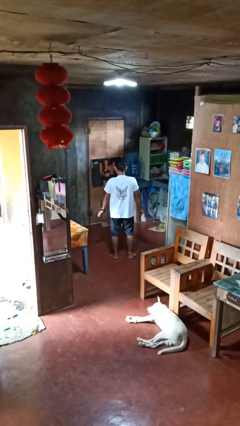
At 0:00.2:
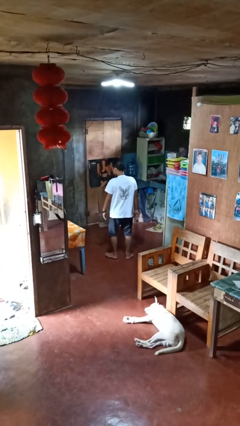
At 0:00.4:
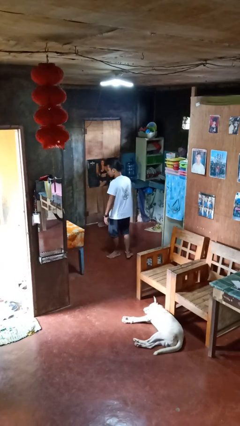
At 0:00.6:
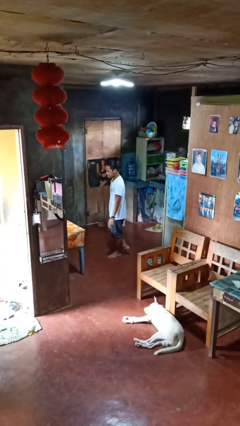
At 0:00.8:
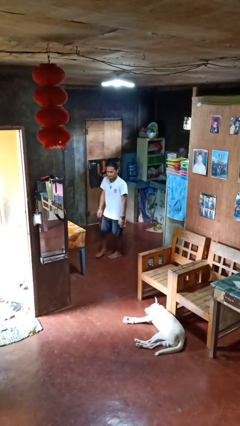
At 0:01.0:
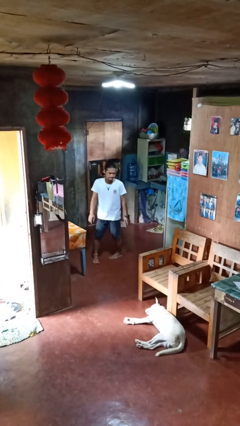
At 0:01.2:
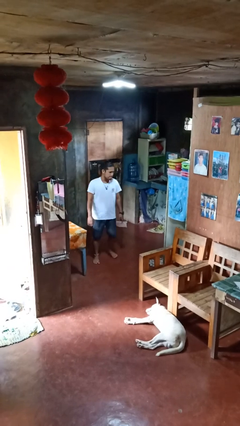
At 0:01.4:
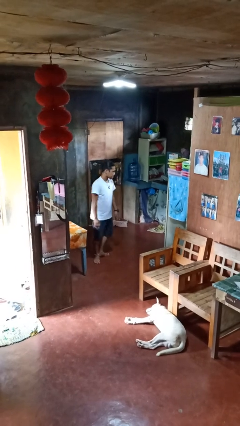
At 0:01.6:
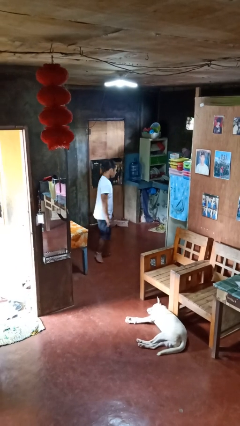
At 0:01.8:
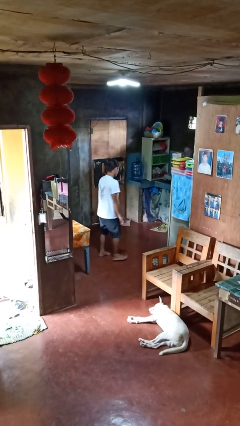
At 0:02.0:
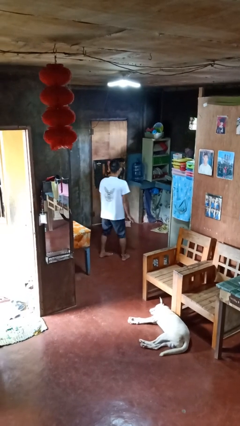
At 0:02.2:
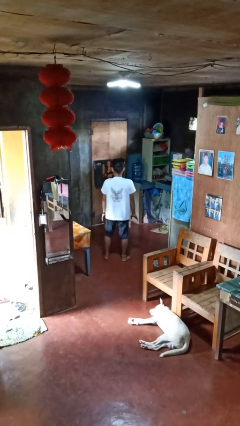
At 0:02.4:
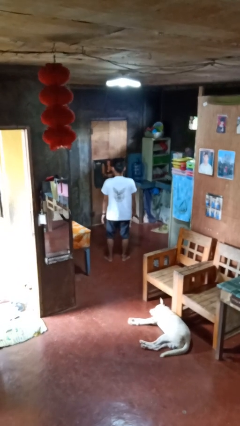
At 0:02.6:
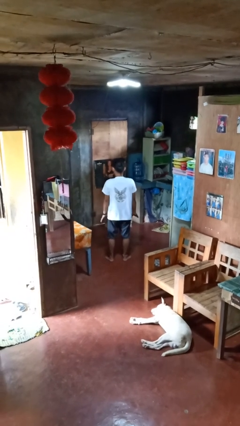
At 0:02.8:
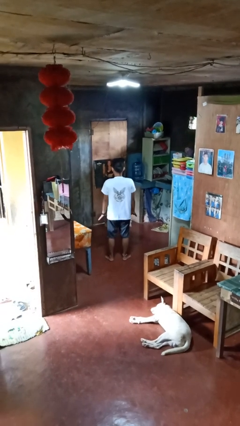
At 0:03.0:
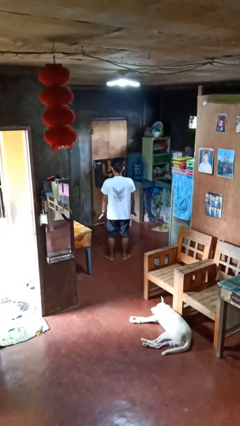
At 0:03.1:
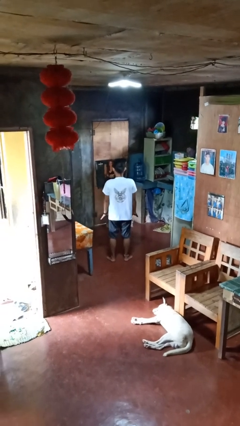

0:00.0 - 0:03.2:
person twirls

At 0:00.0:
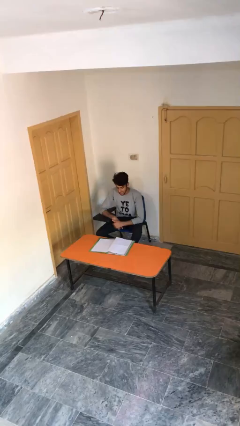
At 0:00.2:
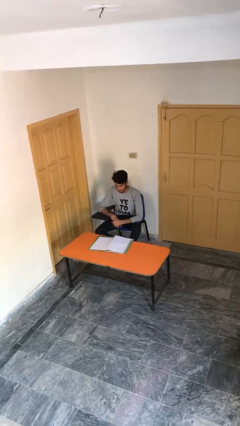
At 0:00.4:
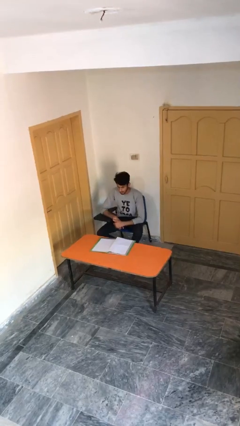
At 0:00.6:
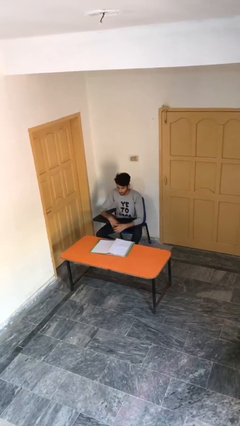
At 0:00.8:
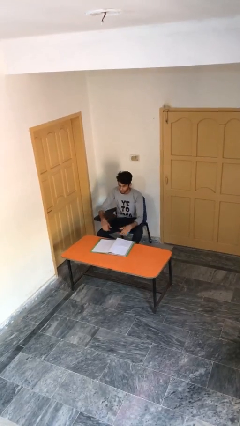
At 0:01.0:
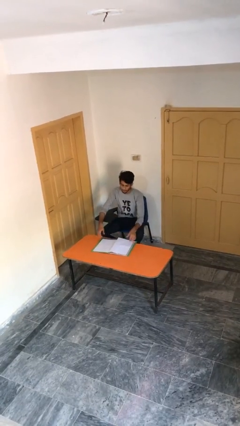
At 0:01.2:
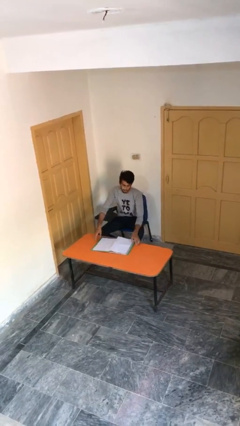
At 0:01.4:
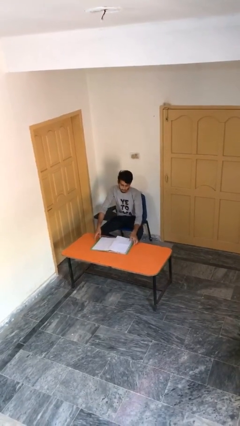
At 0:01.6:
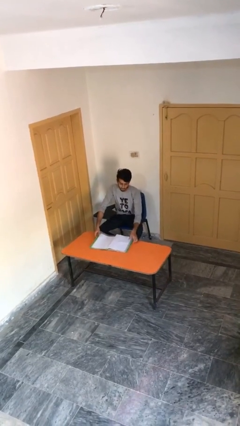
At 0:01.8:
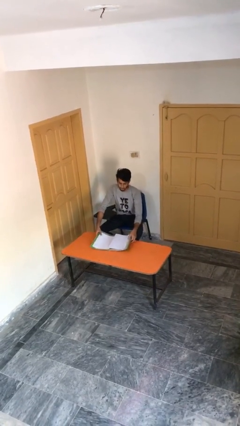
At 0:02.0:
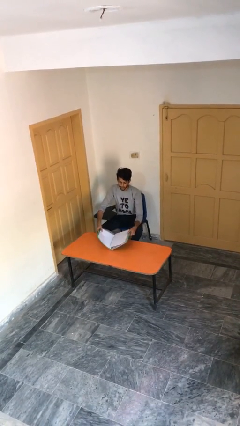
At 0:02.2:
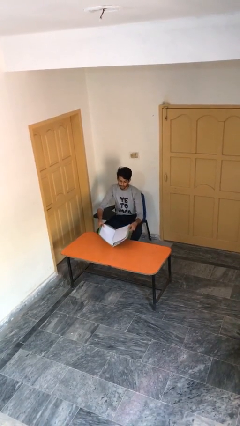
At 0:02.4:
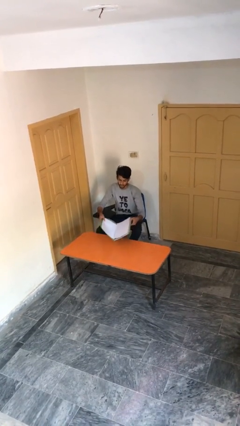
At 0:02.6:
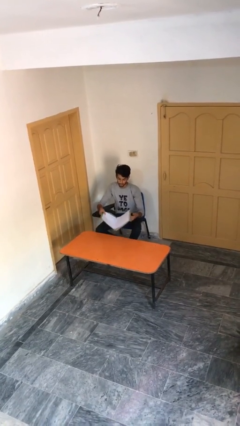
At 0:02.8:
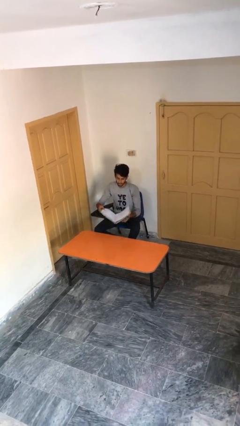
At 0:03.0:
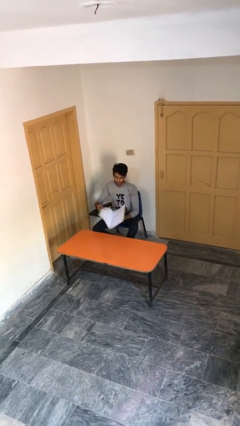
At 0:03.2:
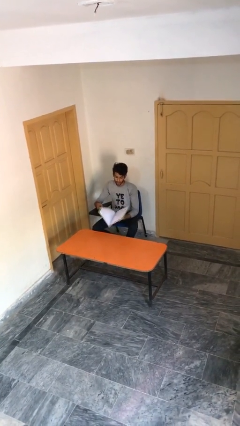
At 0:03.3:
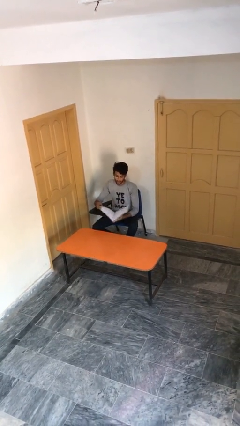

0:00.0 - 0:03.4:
person picks up object from table

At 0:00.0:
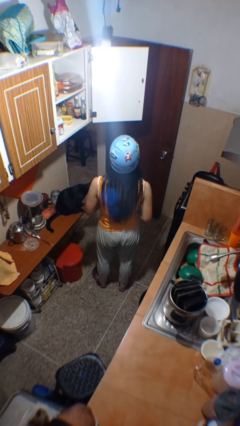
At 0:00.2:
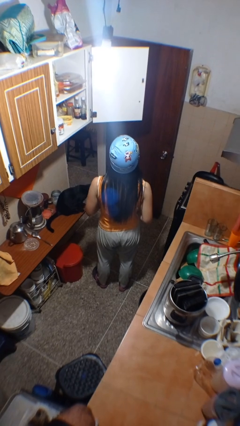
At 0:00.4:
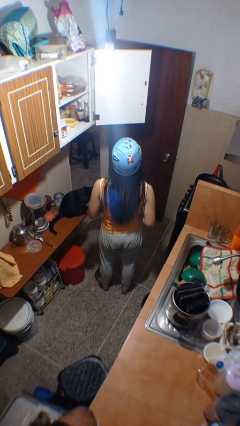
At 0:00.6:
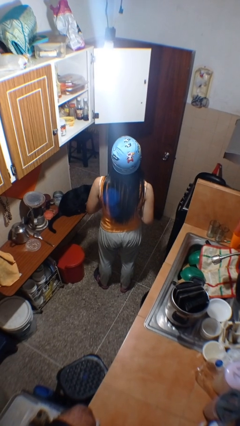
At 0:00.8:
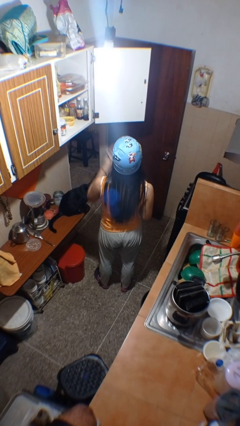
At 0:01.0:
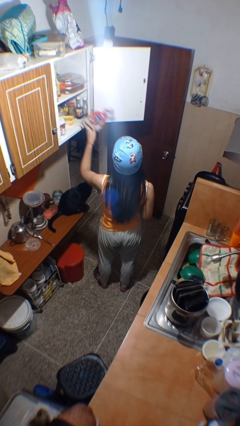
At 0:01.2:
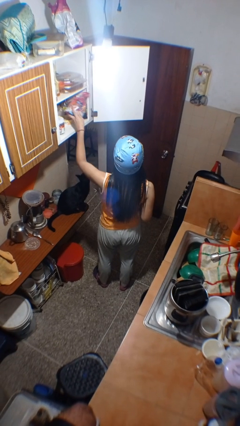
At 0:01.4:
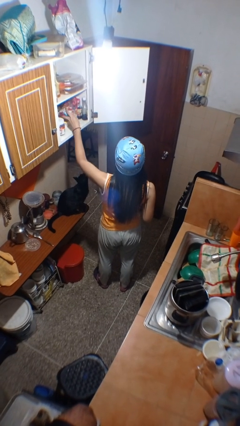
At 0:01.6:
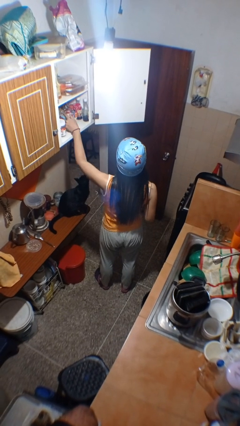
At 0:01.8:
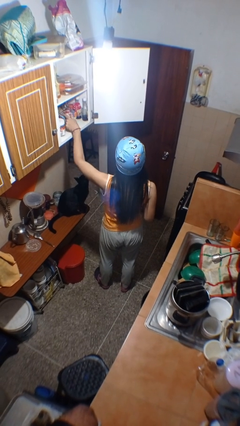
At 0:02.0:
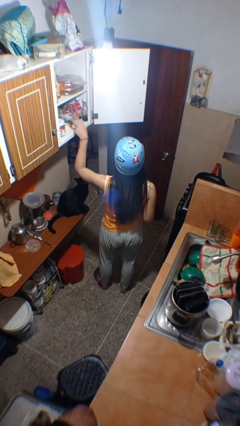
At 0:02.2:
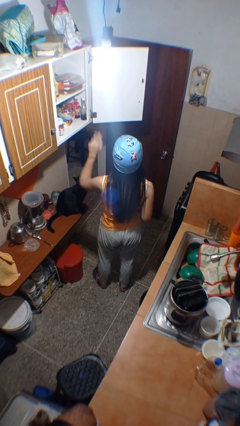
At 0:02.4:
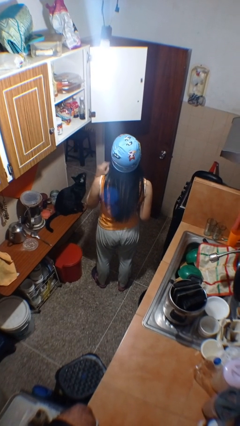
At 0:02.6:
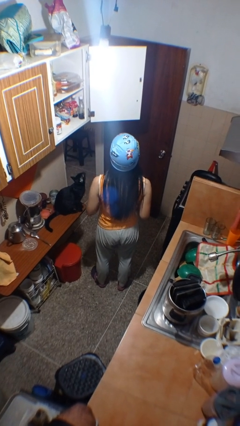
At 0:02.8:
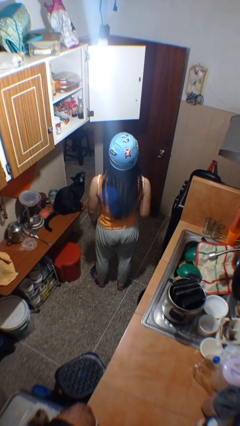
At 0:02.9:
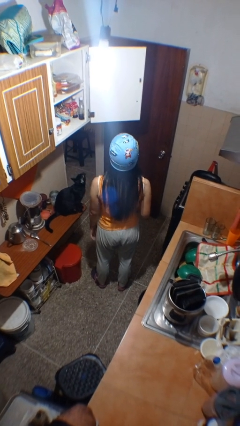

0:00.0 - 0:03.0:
person puts down object into cabinet

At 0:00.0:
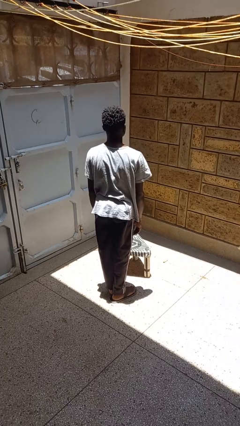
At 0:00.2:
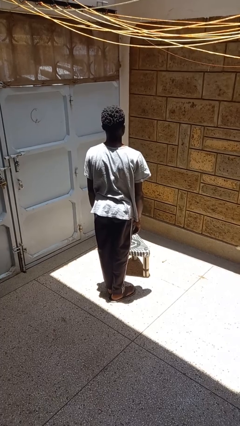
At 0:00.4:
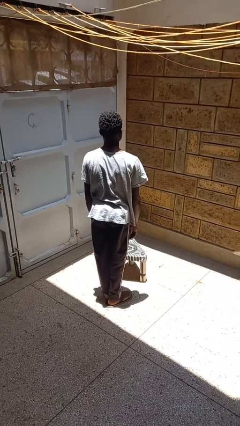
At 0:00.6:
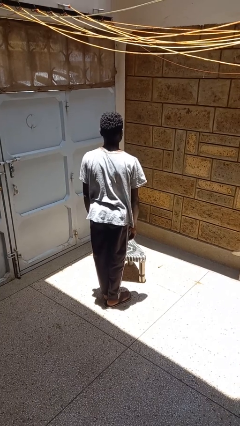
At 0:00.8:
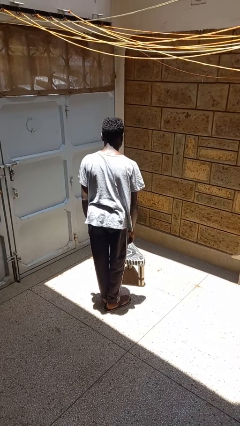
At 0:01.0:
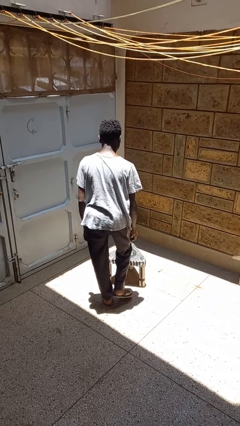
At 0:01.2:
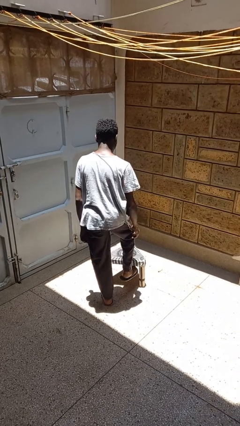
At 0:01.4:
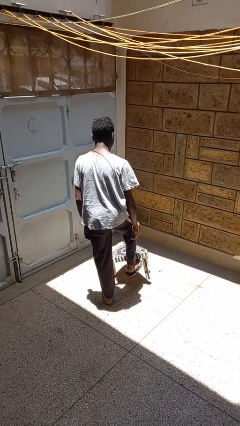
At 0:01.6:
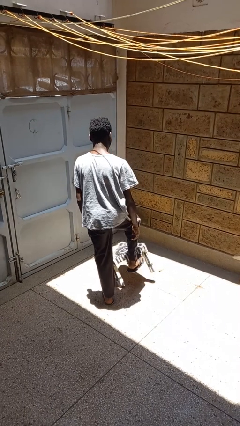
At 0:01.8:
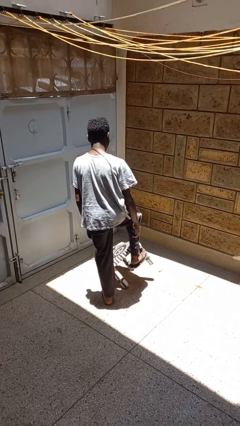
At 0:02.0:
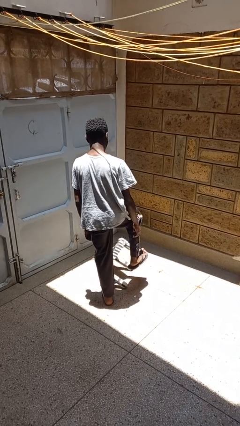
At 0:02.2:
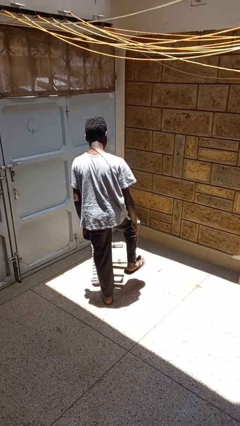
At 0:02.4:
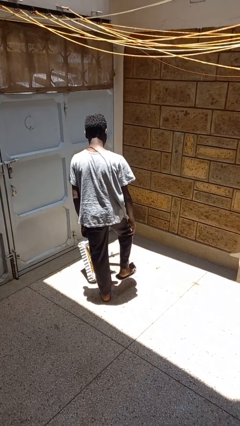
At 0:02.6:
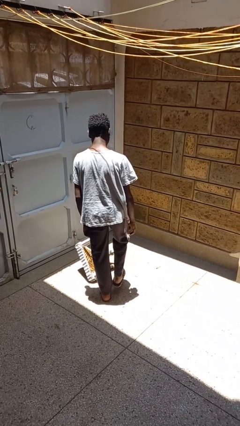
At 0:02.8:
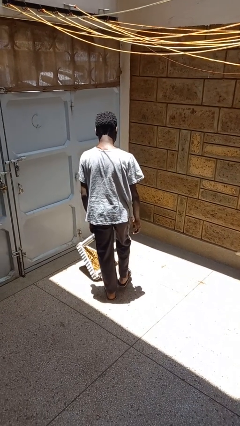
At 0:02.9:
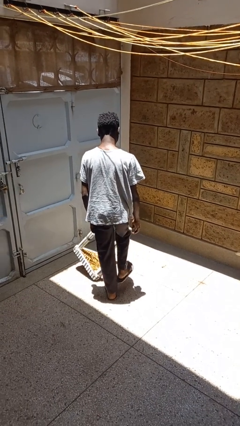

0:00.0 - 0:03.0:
person knocks over furniture

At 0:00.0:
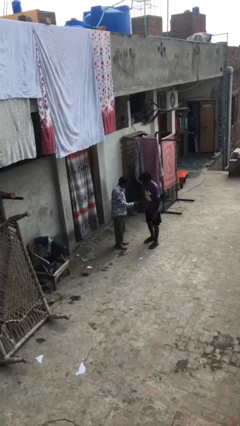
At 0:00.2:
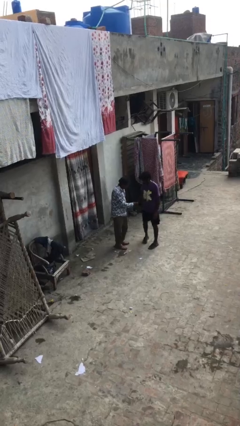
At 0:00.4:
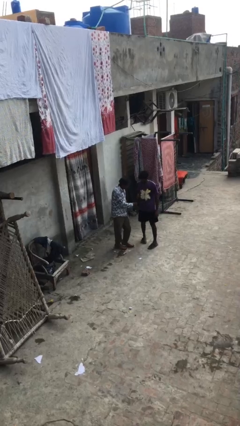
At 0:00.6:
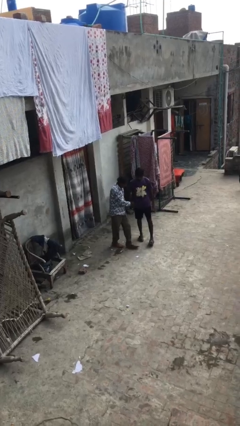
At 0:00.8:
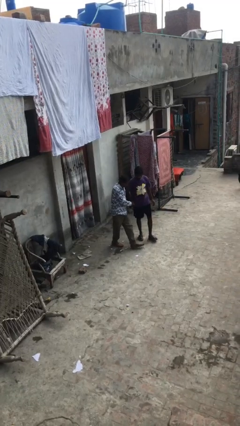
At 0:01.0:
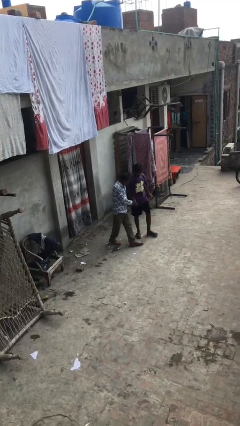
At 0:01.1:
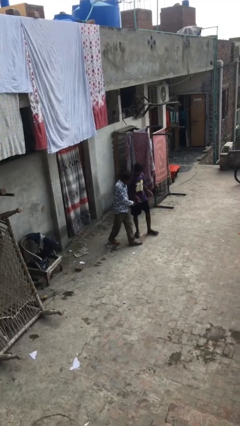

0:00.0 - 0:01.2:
person shakes hand

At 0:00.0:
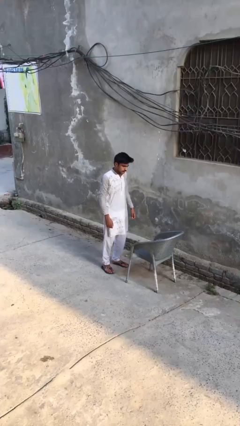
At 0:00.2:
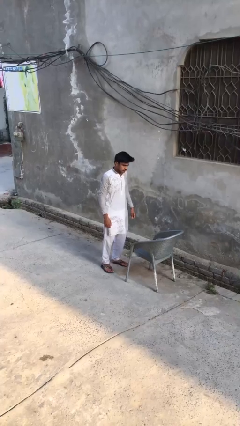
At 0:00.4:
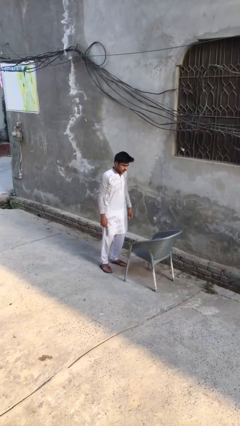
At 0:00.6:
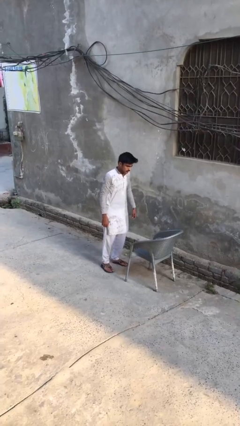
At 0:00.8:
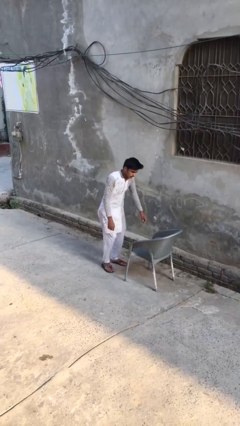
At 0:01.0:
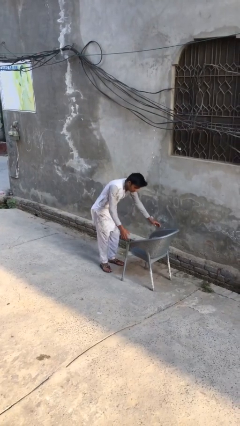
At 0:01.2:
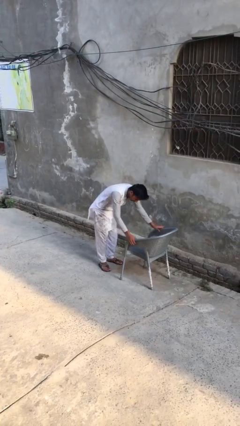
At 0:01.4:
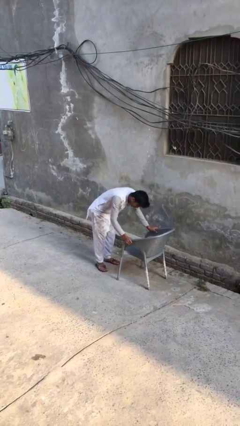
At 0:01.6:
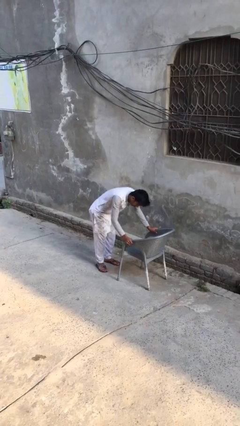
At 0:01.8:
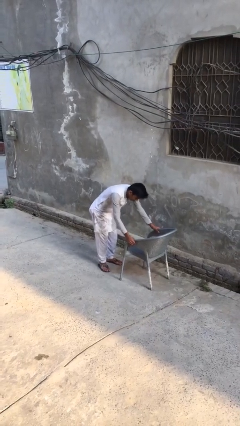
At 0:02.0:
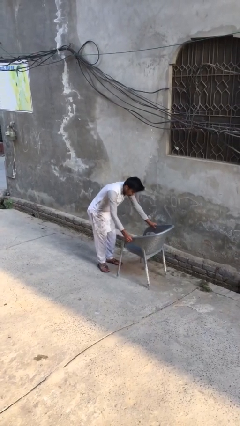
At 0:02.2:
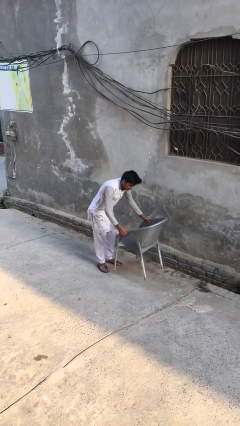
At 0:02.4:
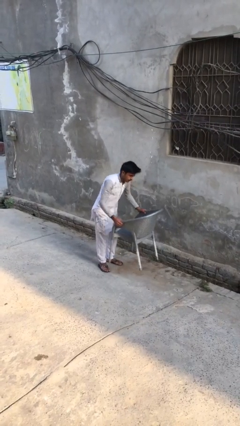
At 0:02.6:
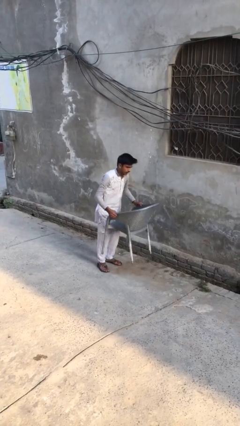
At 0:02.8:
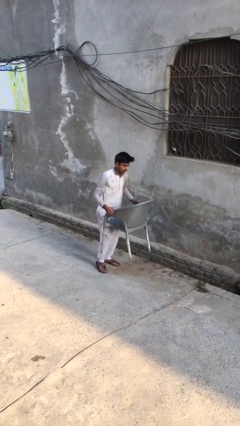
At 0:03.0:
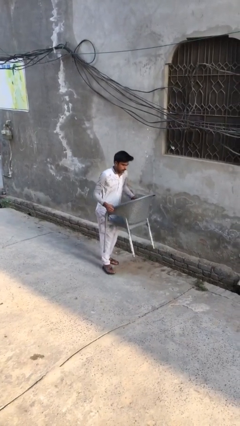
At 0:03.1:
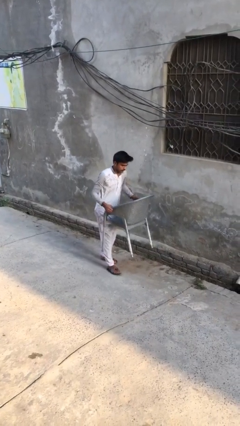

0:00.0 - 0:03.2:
person picks up object from floor

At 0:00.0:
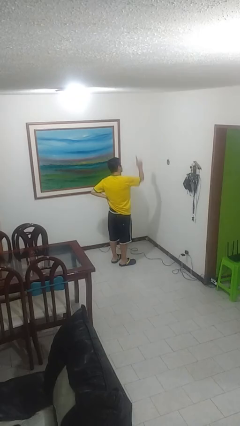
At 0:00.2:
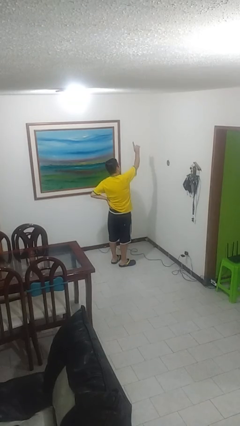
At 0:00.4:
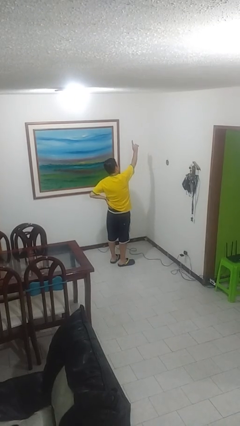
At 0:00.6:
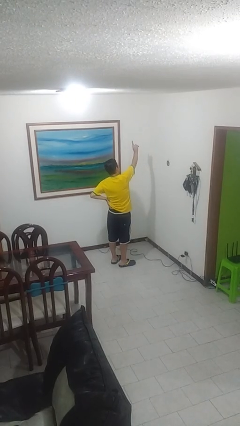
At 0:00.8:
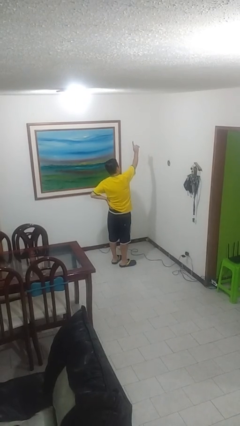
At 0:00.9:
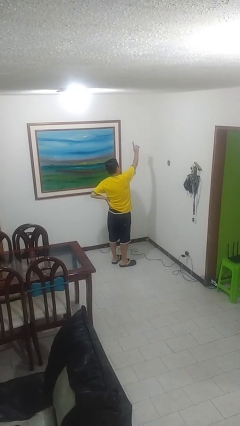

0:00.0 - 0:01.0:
person gestures number one
